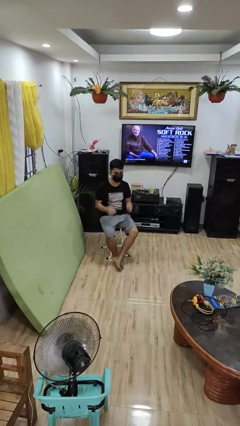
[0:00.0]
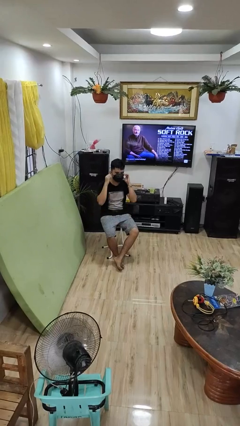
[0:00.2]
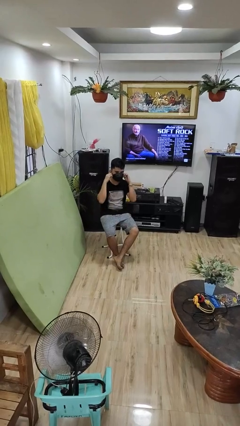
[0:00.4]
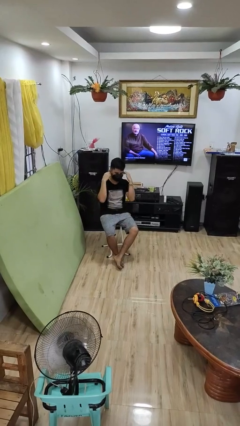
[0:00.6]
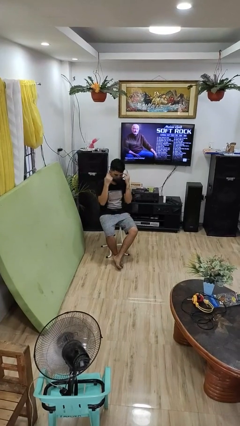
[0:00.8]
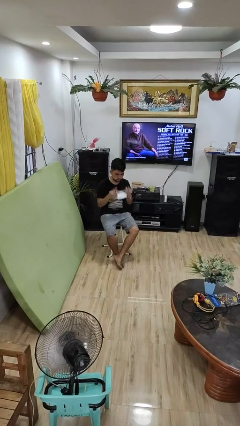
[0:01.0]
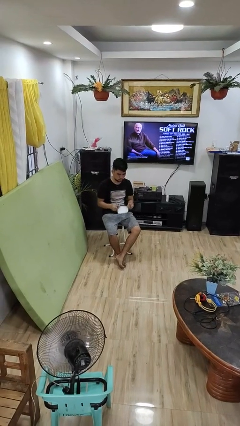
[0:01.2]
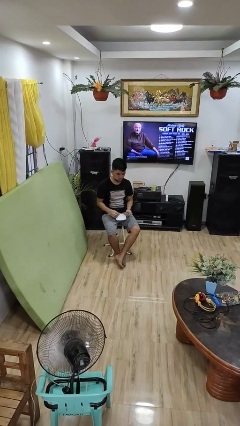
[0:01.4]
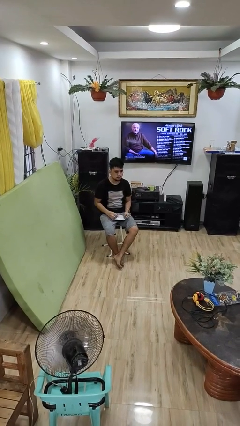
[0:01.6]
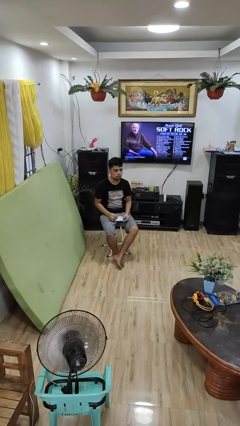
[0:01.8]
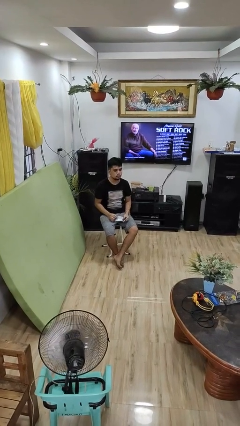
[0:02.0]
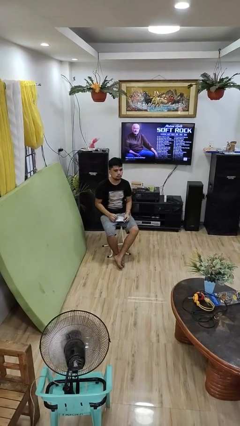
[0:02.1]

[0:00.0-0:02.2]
person takes off facemask

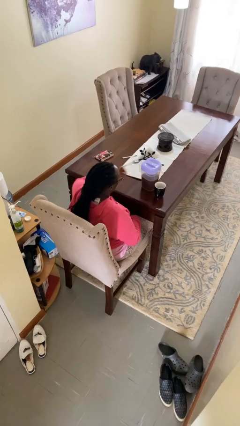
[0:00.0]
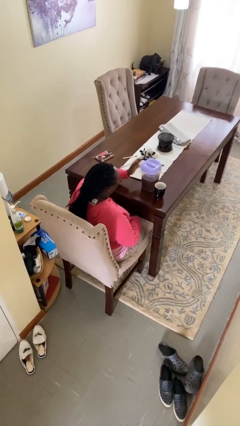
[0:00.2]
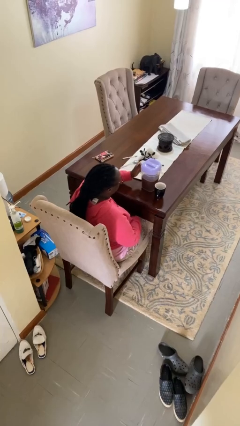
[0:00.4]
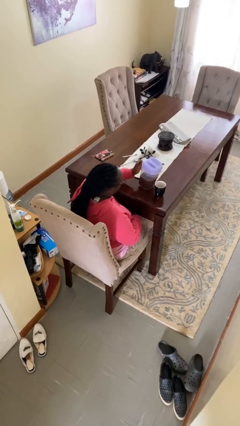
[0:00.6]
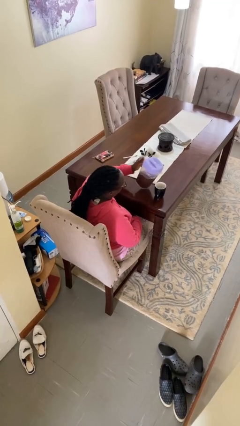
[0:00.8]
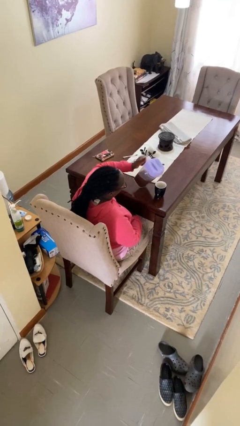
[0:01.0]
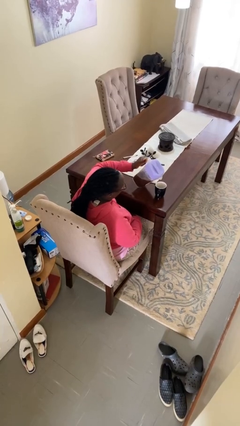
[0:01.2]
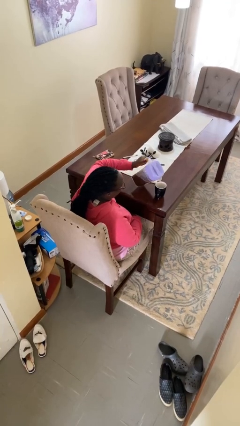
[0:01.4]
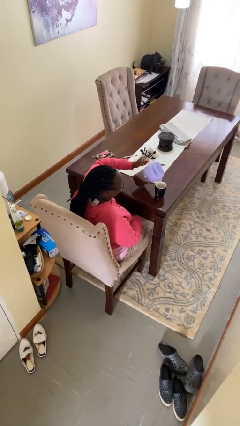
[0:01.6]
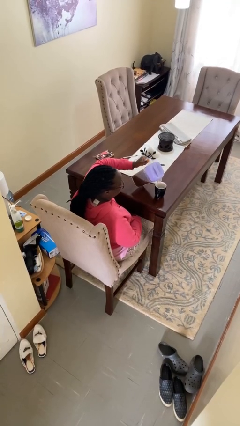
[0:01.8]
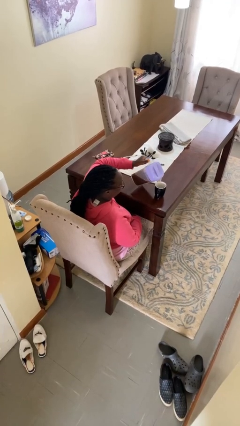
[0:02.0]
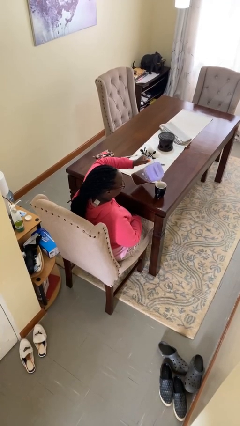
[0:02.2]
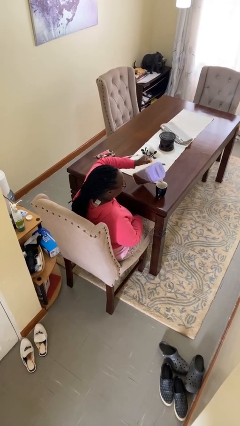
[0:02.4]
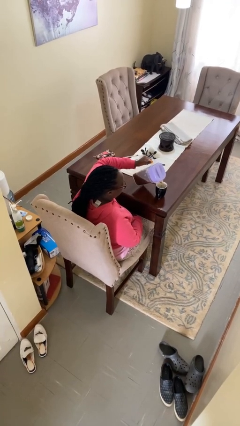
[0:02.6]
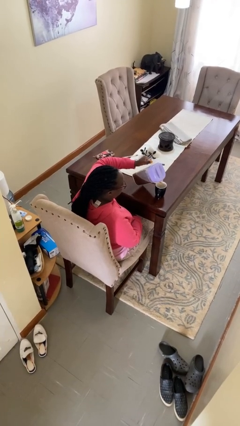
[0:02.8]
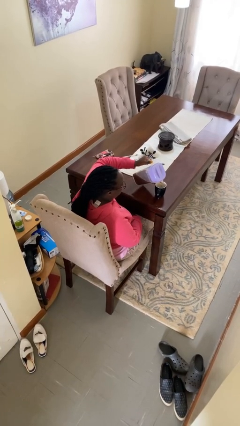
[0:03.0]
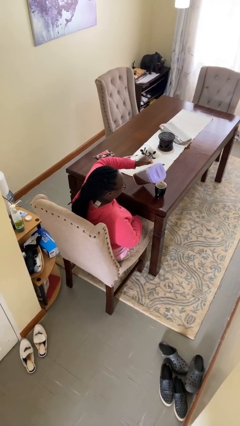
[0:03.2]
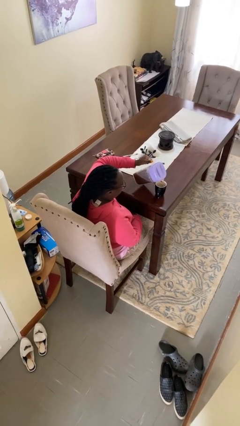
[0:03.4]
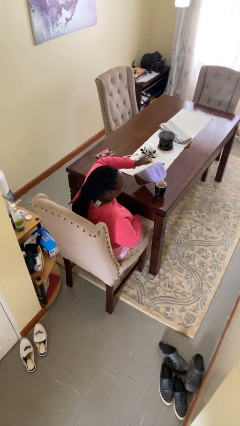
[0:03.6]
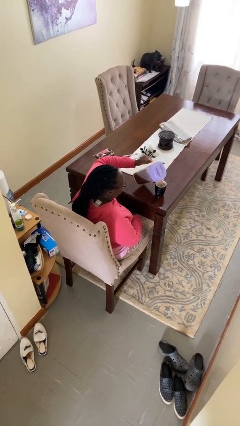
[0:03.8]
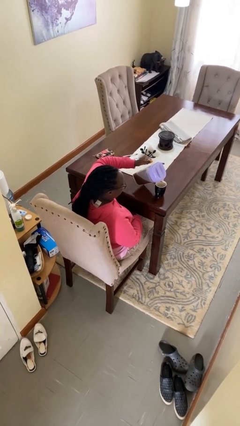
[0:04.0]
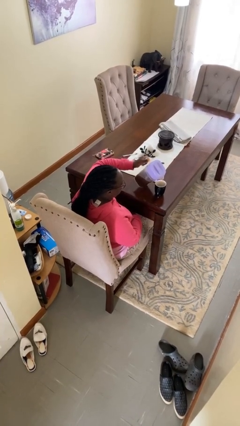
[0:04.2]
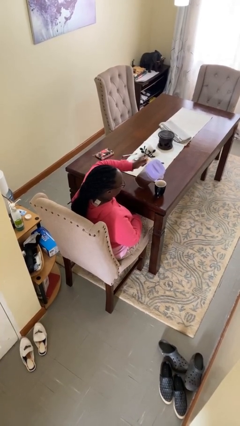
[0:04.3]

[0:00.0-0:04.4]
person pours coffee into mug

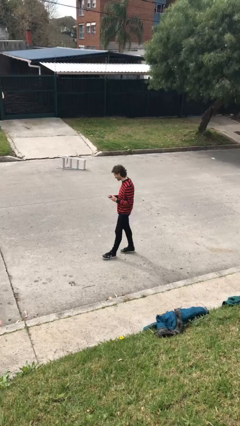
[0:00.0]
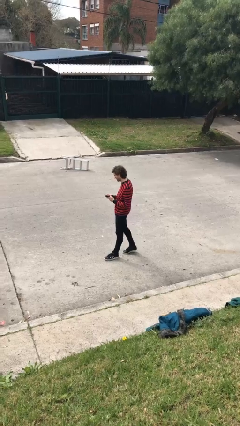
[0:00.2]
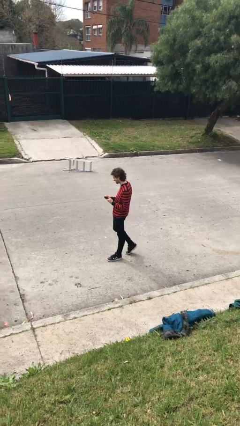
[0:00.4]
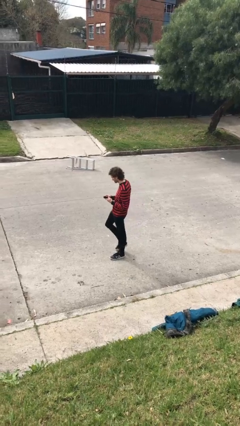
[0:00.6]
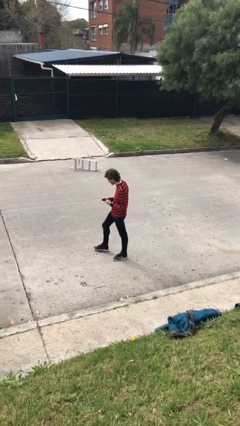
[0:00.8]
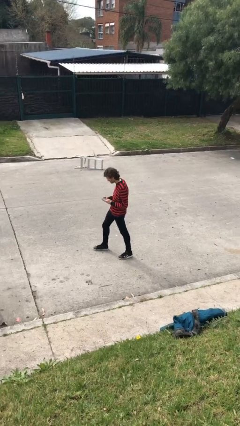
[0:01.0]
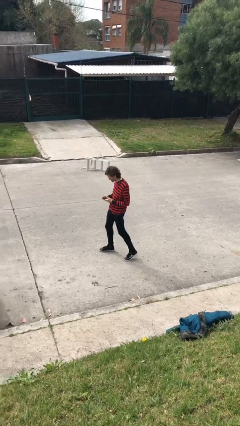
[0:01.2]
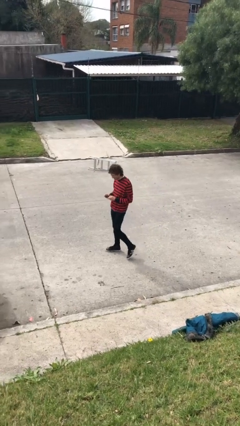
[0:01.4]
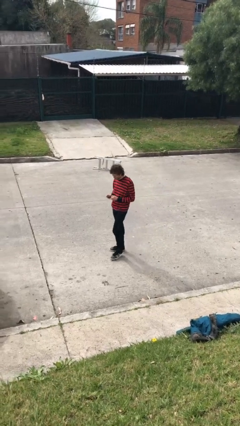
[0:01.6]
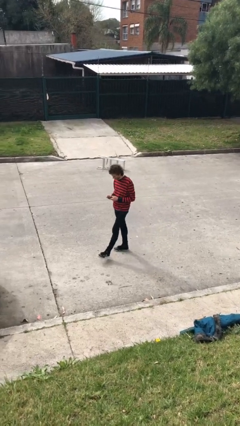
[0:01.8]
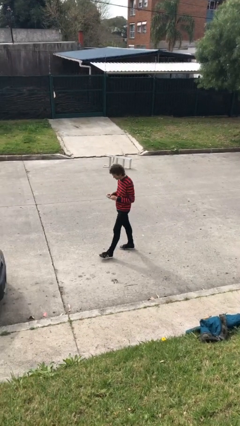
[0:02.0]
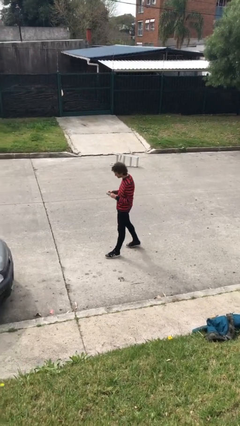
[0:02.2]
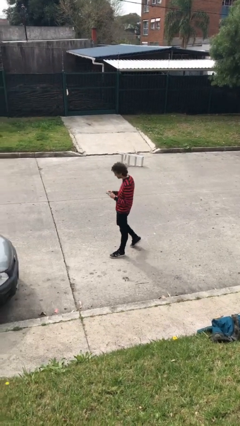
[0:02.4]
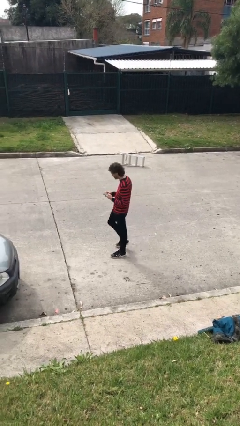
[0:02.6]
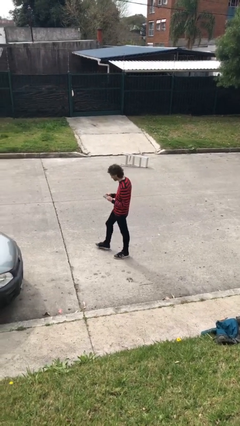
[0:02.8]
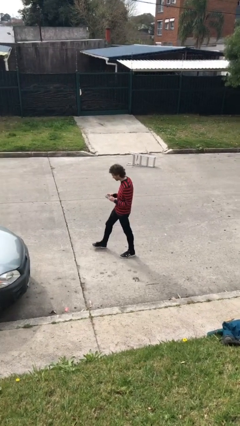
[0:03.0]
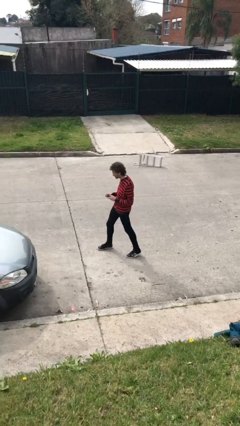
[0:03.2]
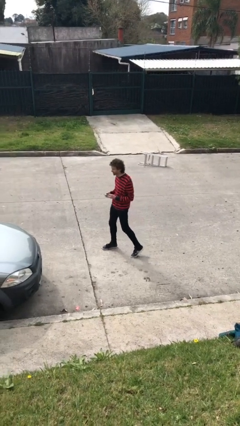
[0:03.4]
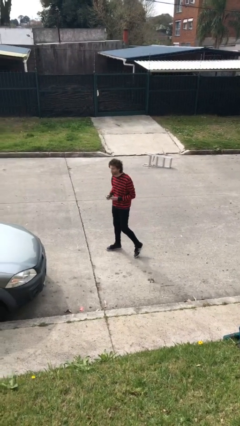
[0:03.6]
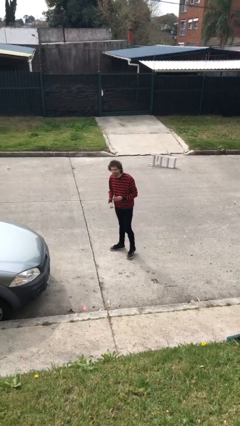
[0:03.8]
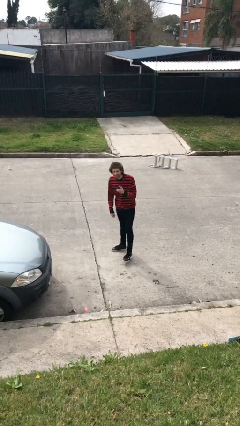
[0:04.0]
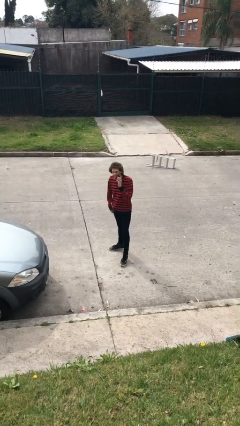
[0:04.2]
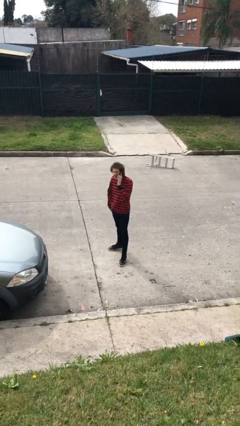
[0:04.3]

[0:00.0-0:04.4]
person texts on phone

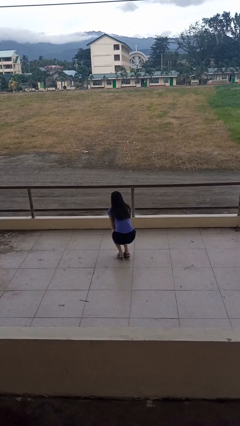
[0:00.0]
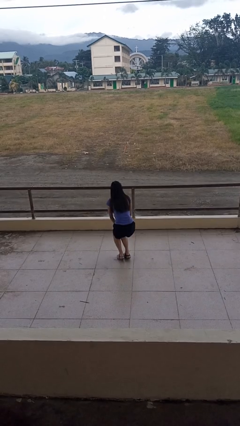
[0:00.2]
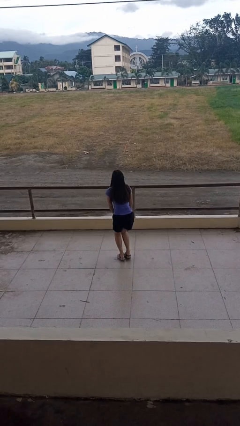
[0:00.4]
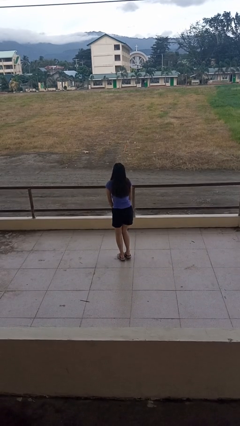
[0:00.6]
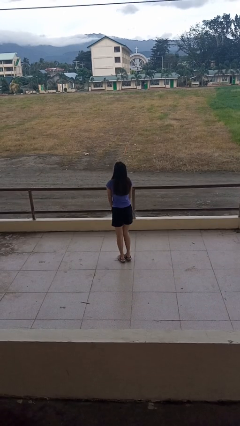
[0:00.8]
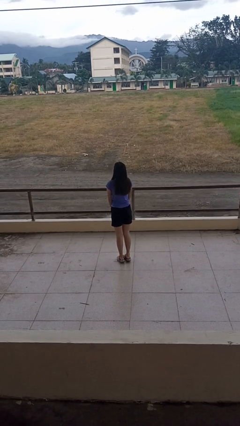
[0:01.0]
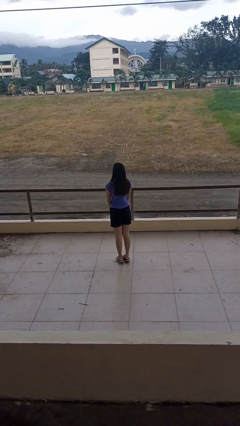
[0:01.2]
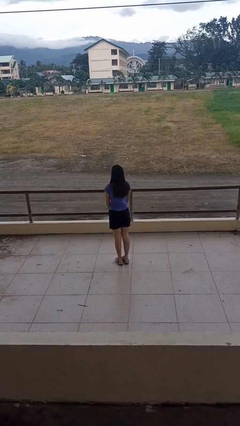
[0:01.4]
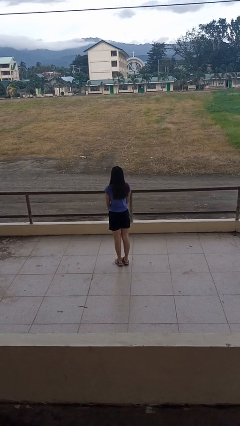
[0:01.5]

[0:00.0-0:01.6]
person stands up

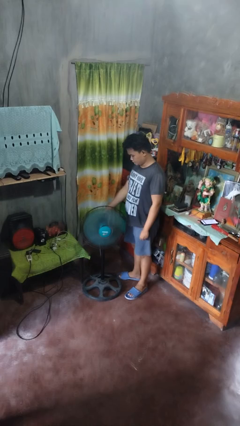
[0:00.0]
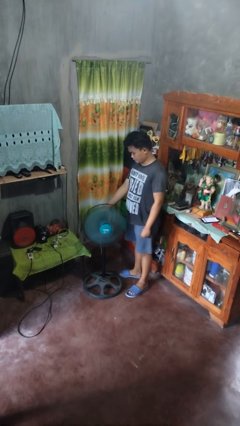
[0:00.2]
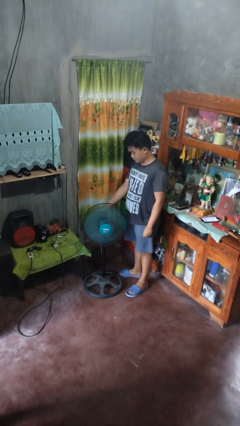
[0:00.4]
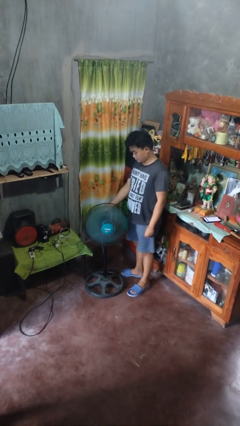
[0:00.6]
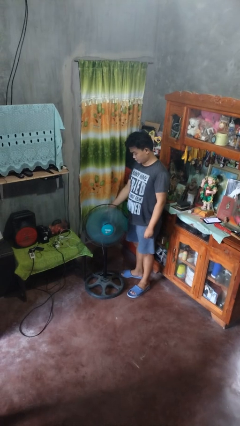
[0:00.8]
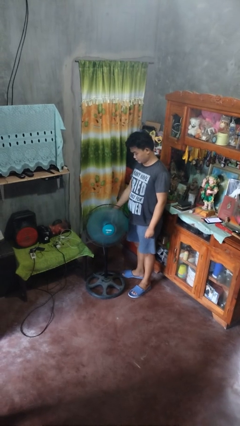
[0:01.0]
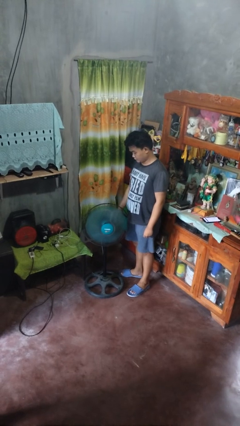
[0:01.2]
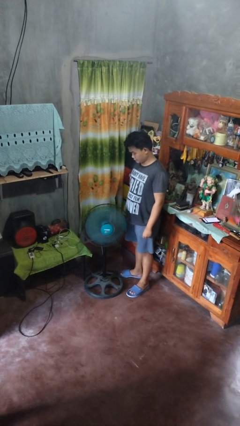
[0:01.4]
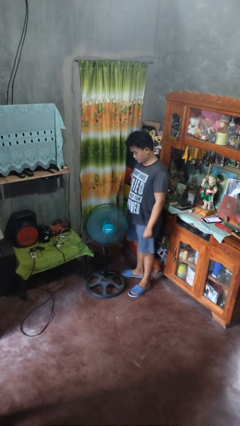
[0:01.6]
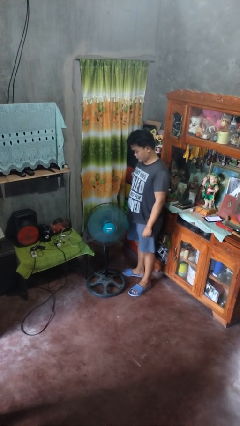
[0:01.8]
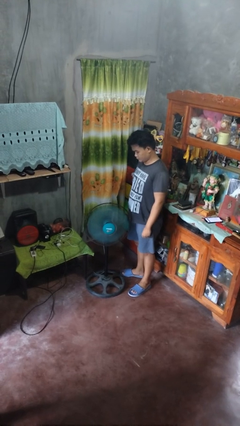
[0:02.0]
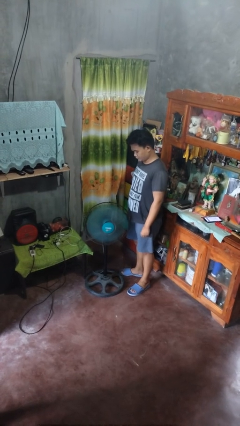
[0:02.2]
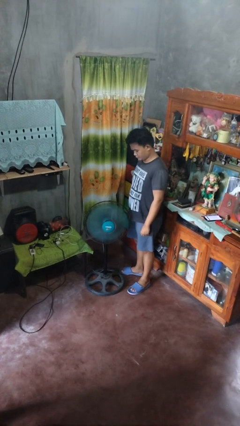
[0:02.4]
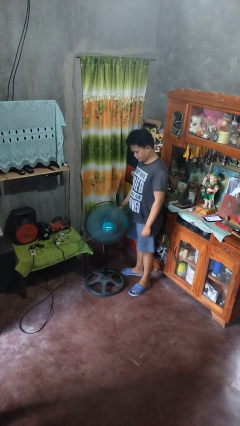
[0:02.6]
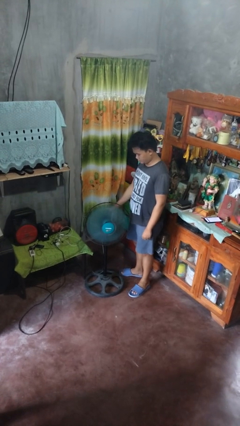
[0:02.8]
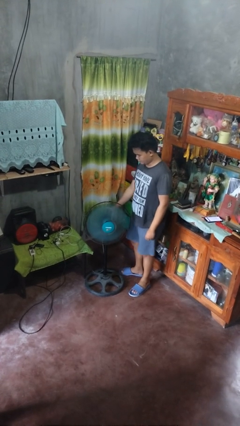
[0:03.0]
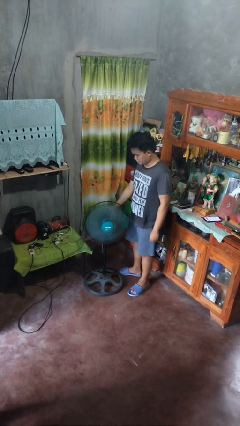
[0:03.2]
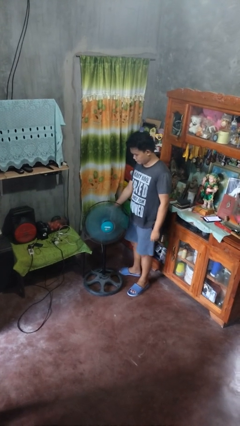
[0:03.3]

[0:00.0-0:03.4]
person turns off fan

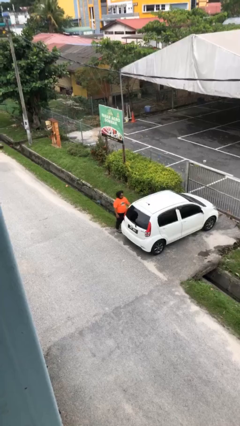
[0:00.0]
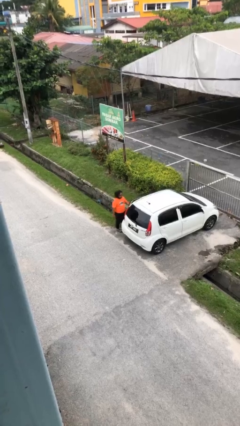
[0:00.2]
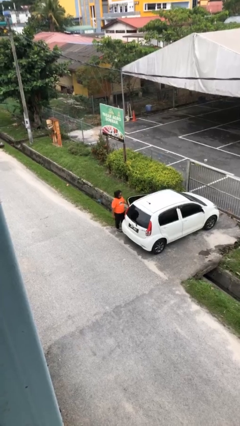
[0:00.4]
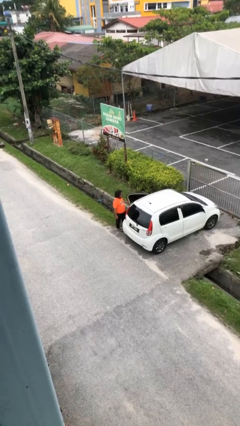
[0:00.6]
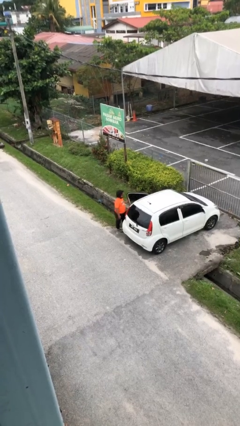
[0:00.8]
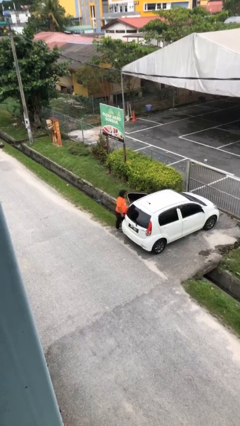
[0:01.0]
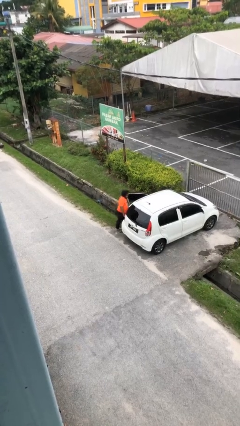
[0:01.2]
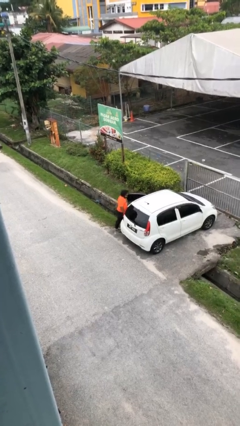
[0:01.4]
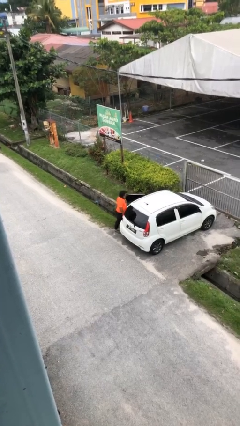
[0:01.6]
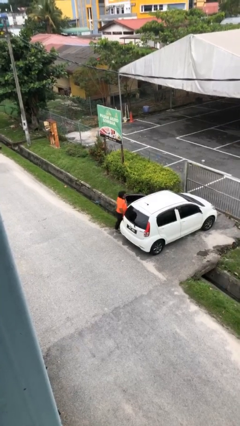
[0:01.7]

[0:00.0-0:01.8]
person opens car door
